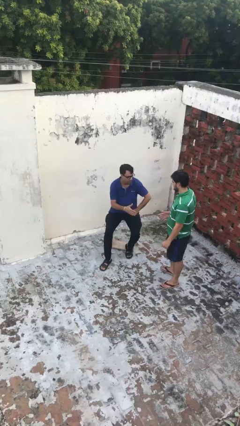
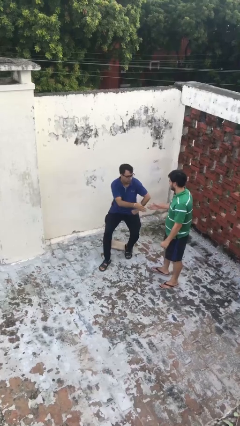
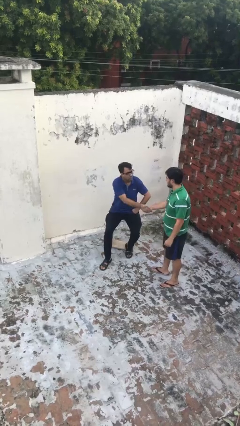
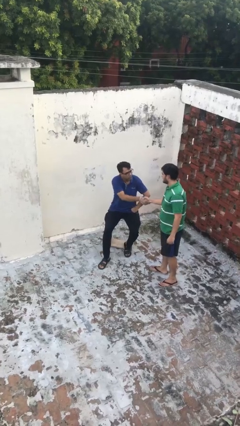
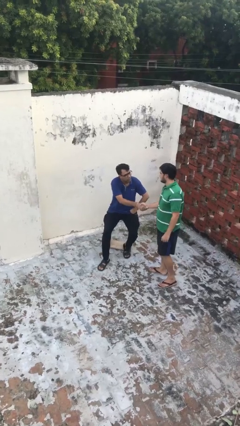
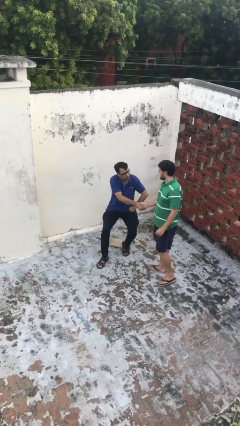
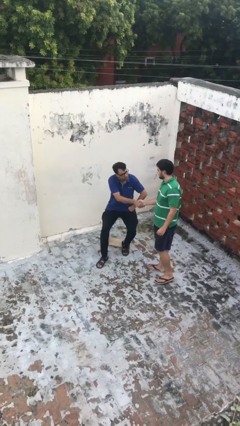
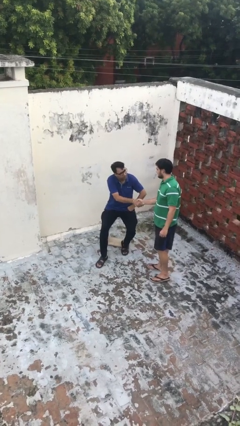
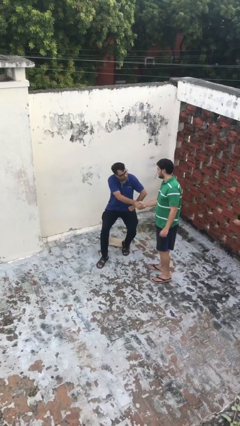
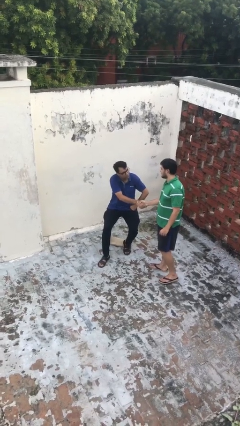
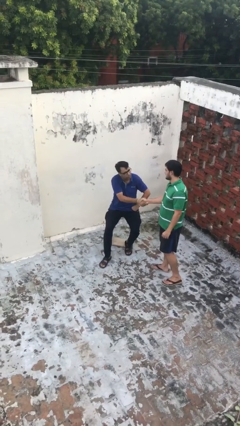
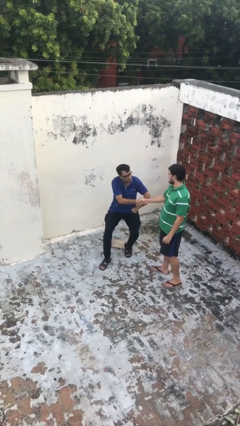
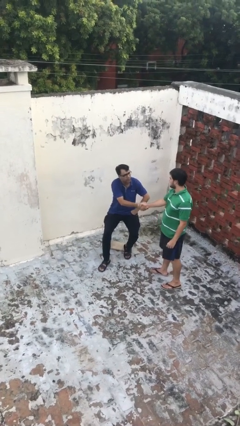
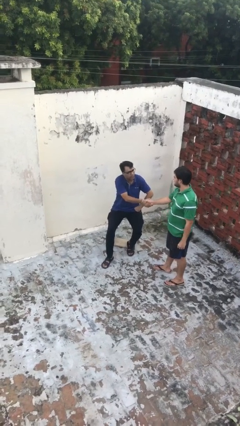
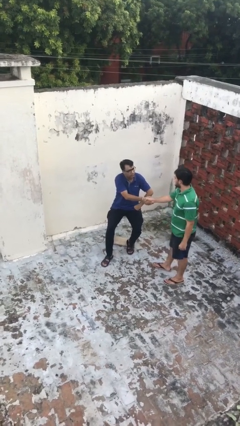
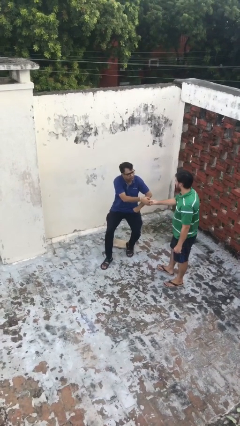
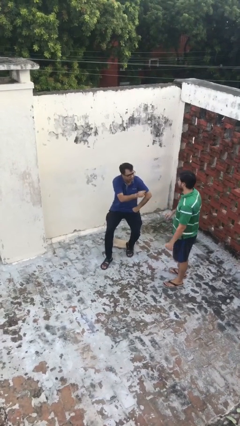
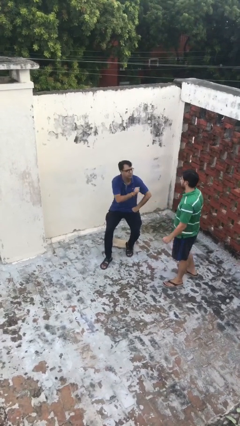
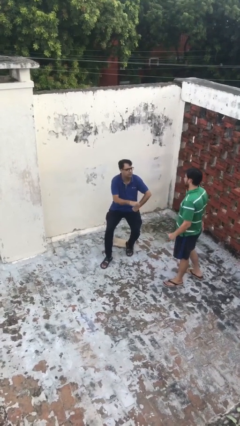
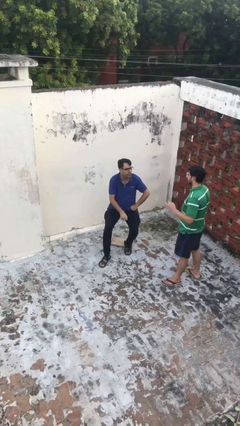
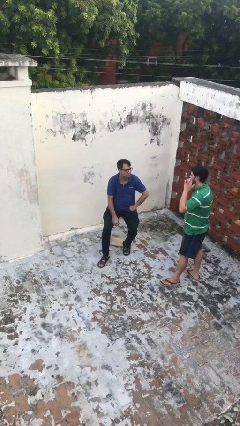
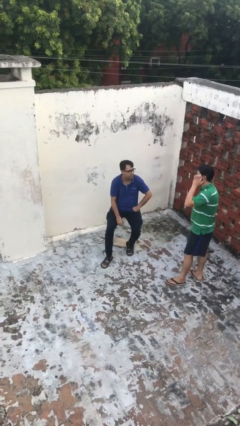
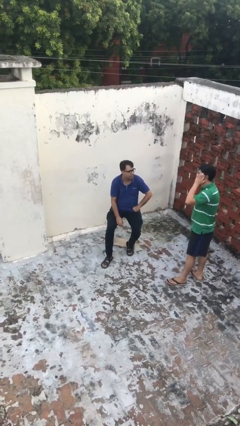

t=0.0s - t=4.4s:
person shakes hand

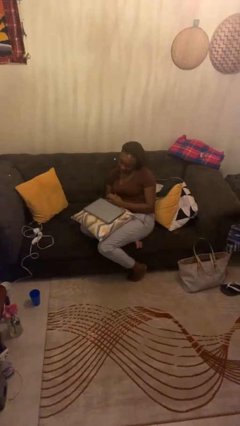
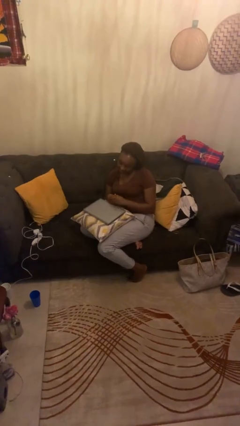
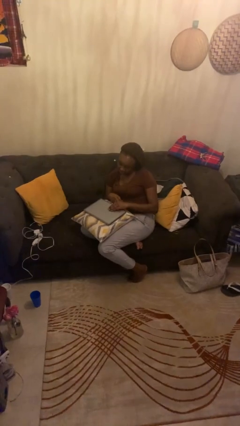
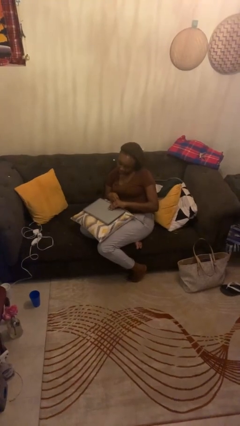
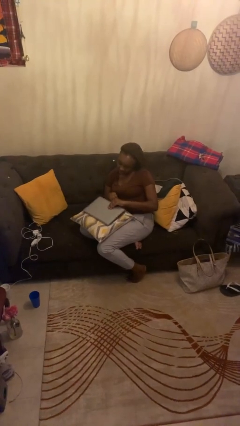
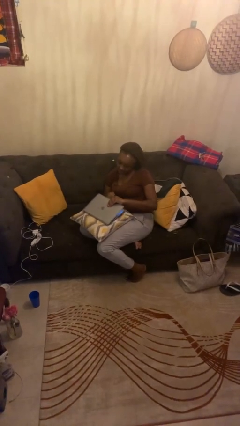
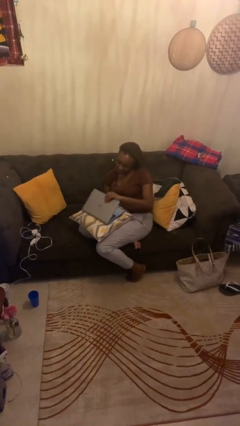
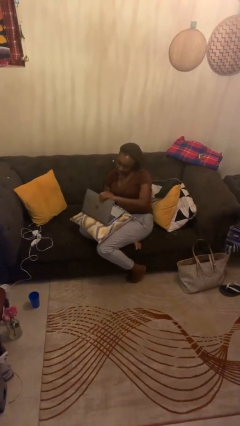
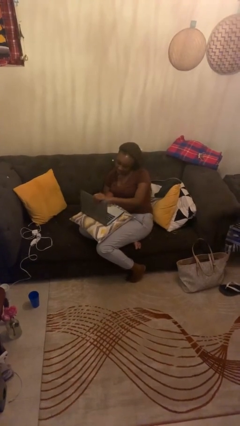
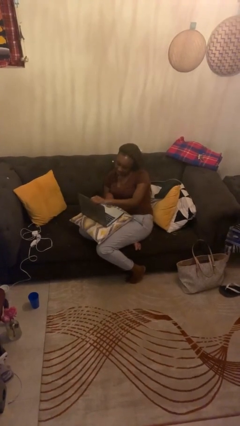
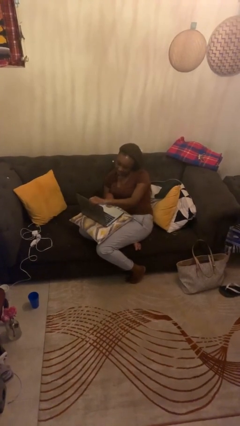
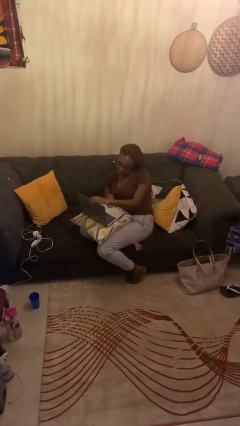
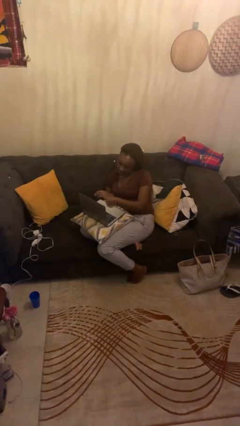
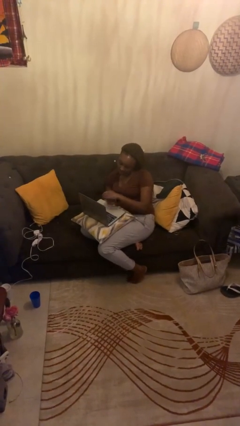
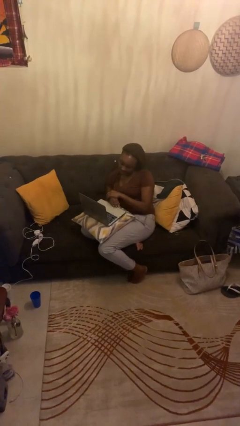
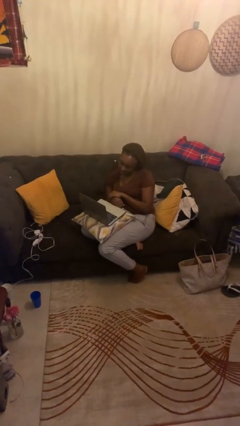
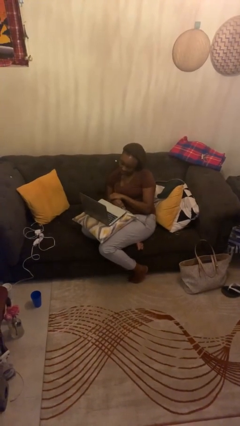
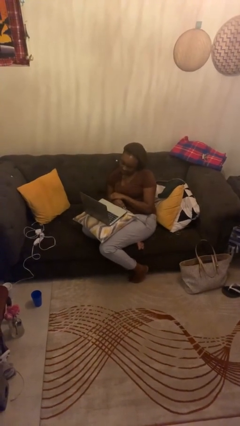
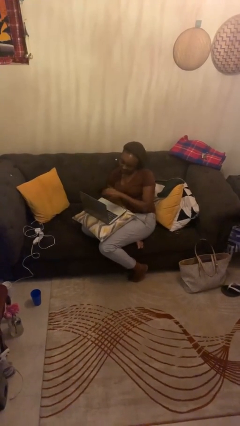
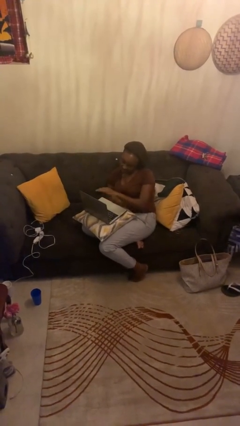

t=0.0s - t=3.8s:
person opens laptop

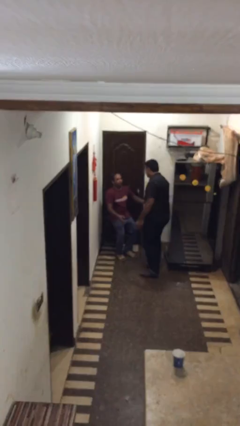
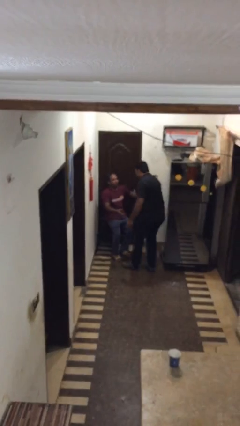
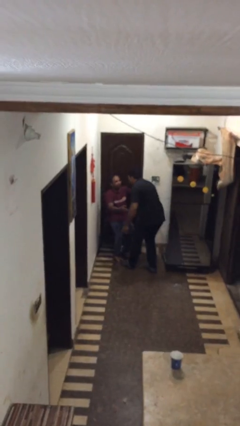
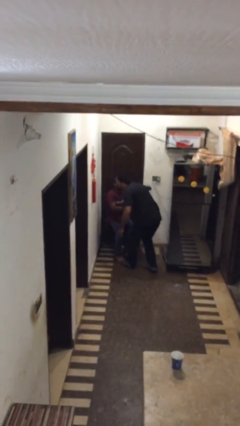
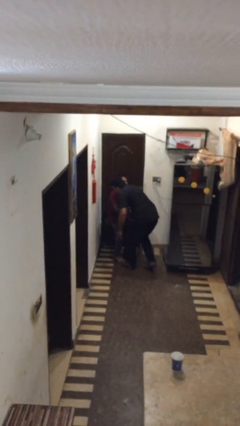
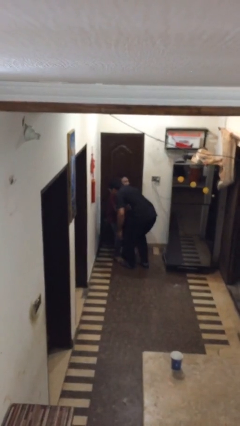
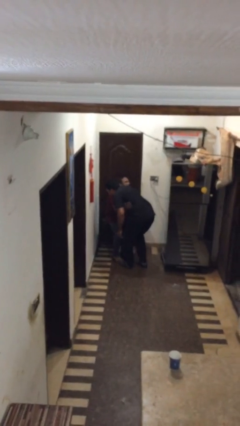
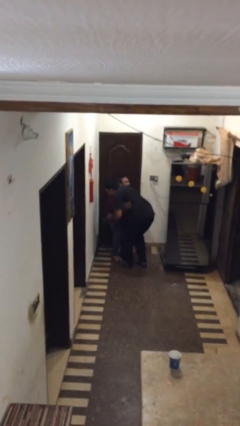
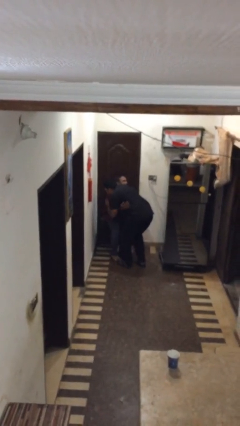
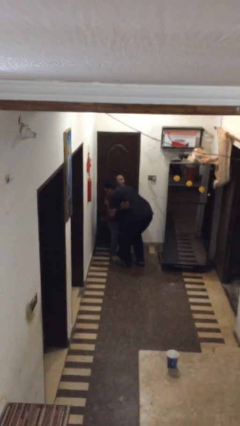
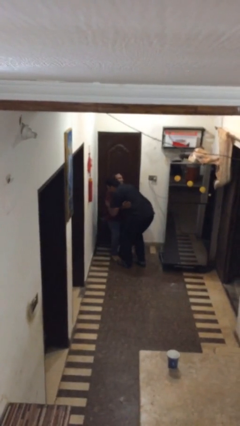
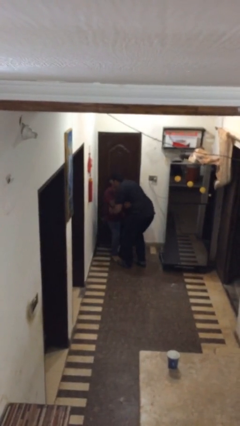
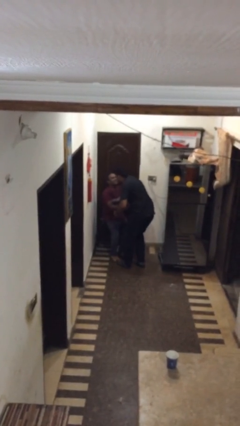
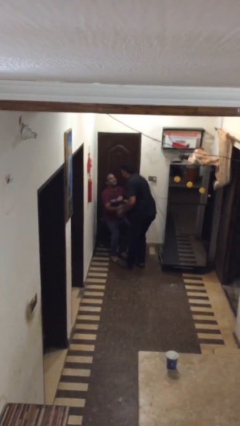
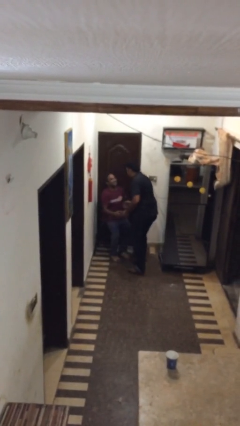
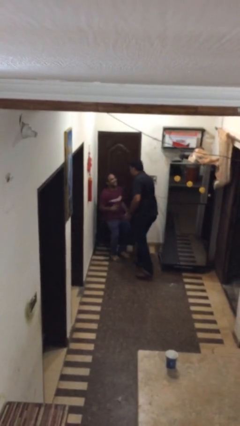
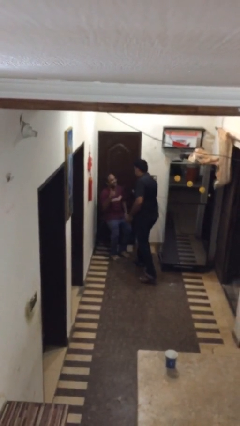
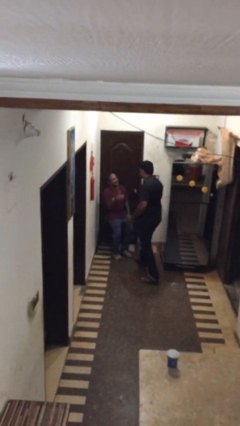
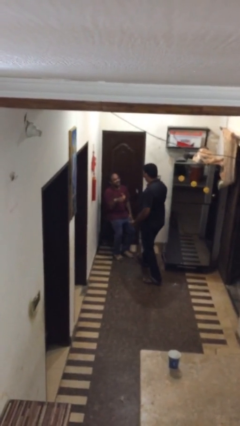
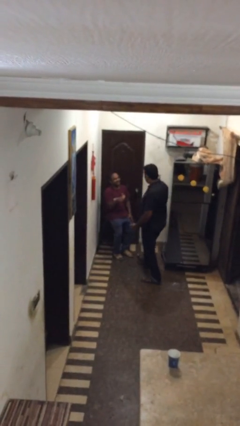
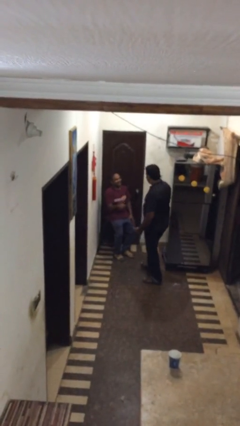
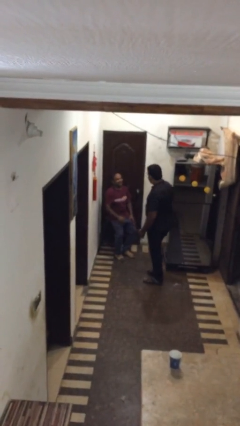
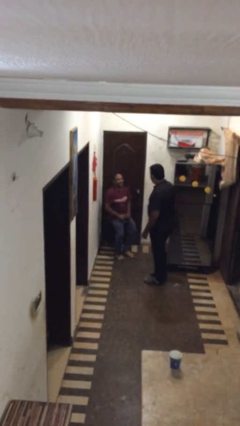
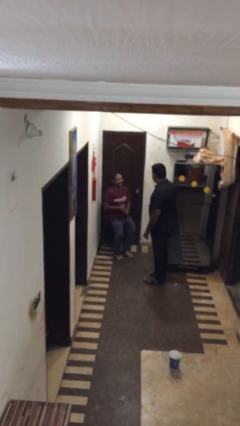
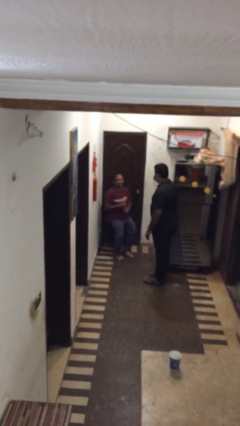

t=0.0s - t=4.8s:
person embraces person

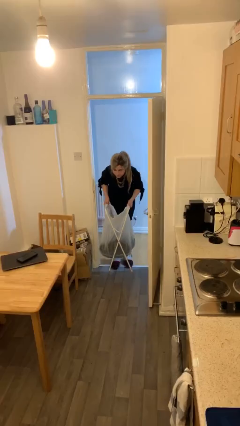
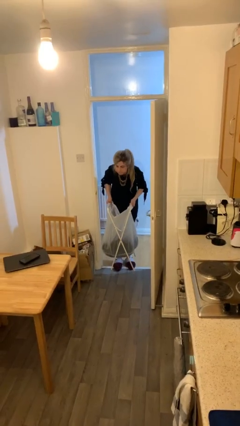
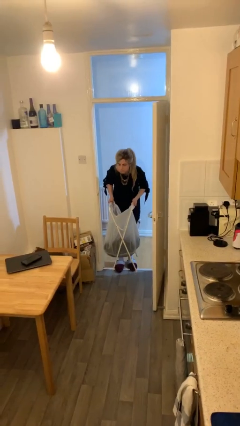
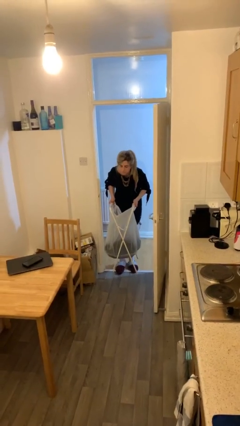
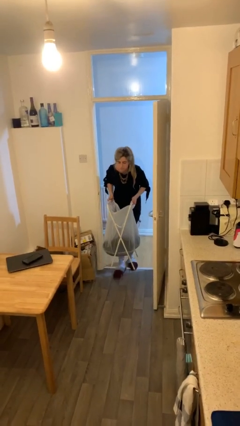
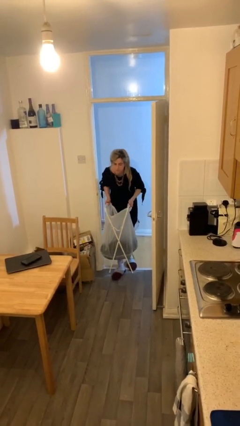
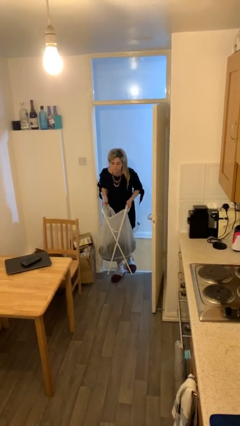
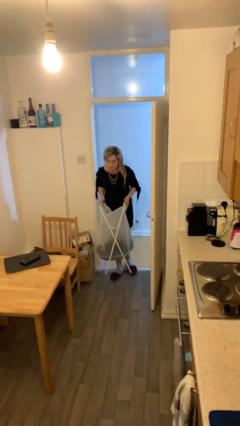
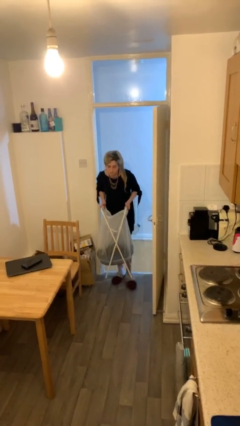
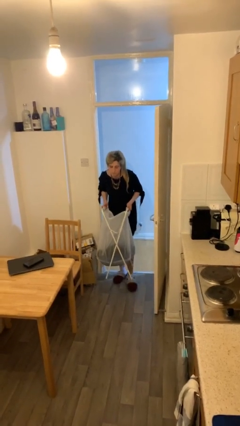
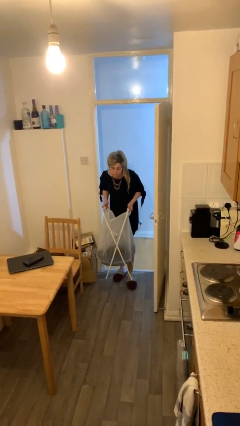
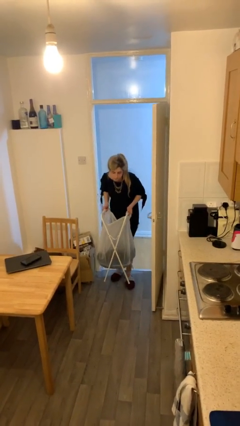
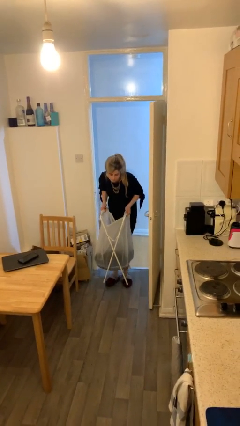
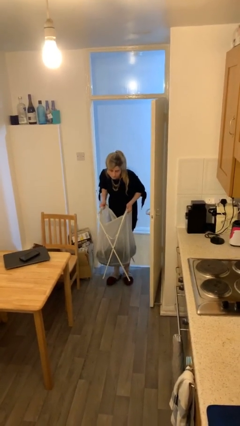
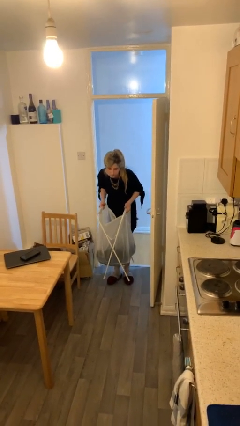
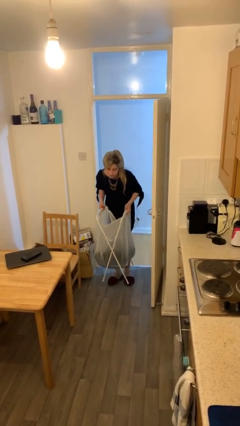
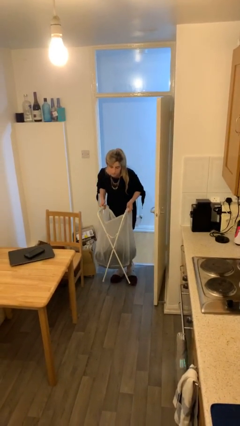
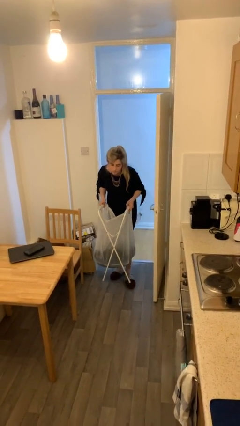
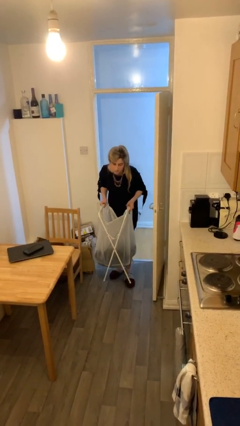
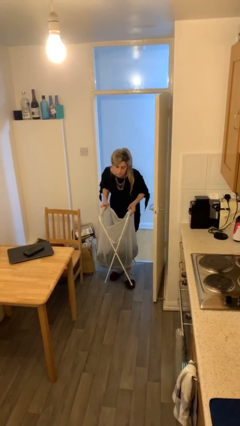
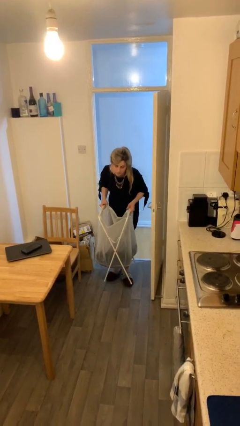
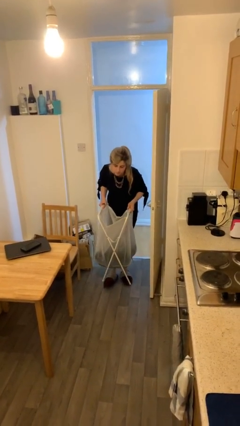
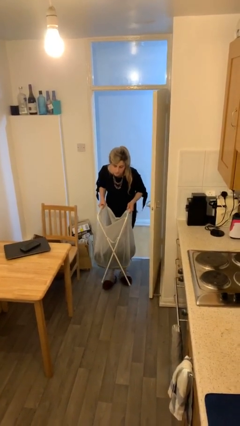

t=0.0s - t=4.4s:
person carries heavy object

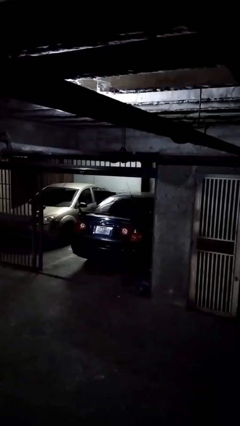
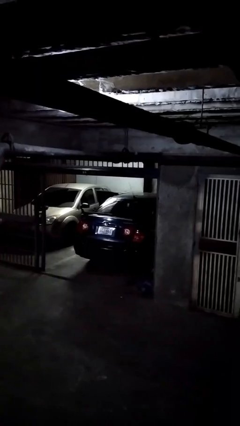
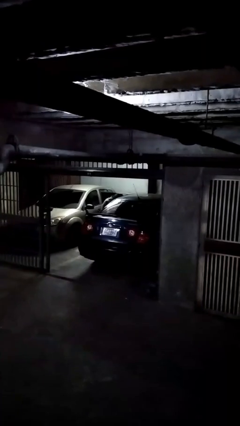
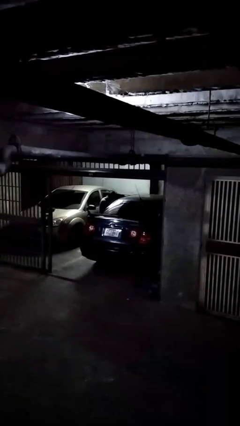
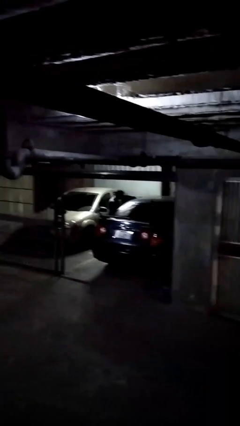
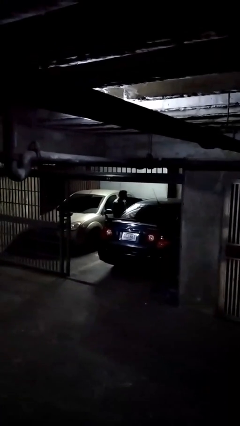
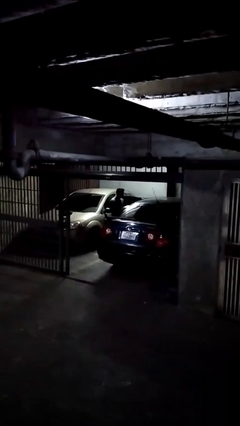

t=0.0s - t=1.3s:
person unloads car
